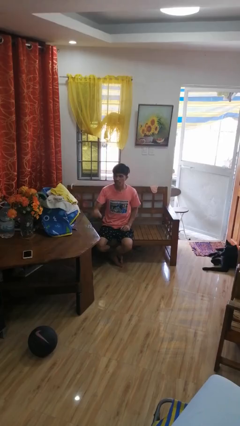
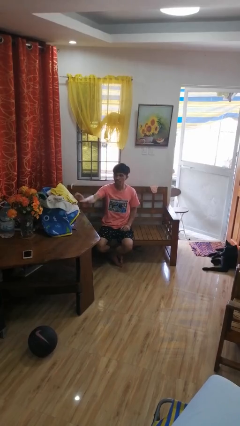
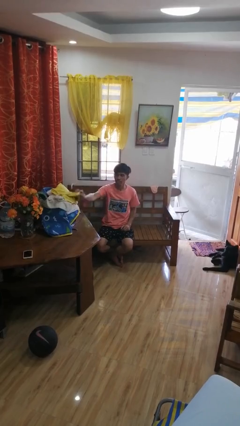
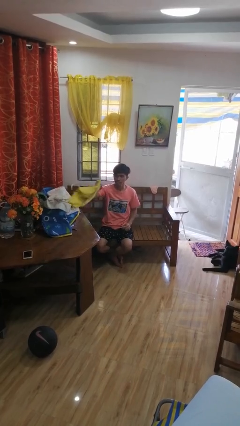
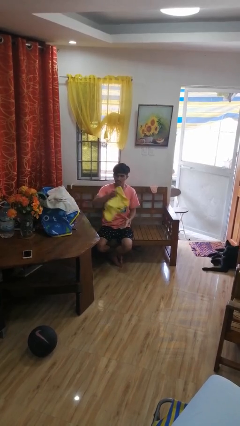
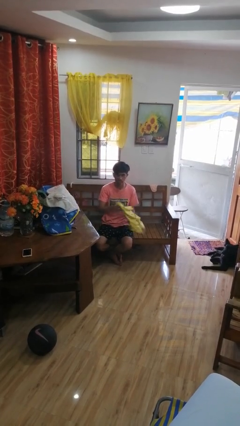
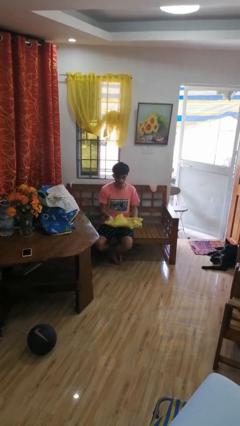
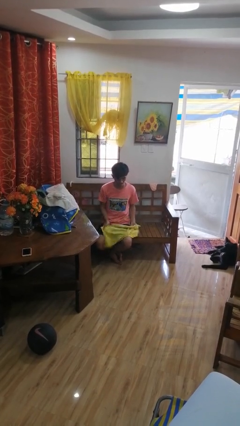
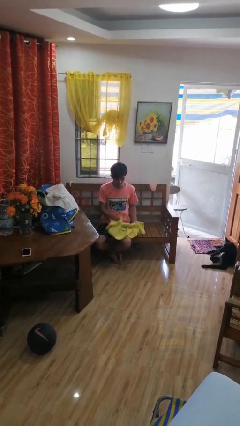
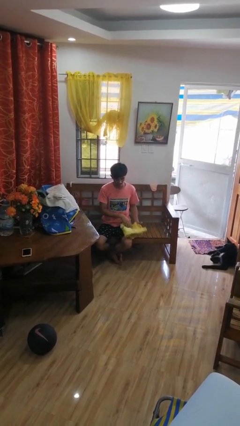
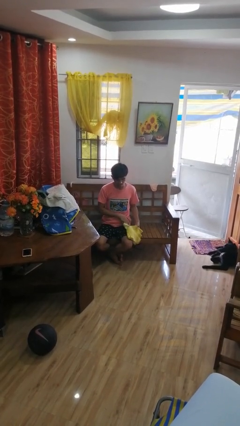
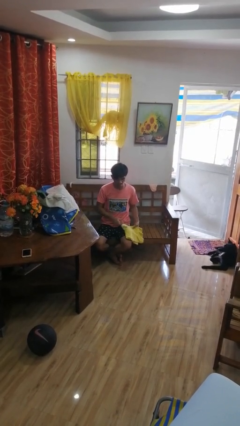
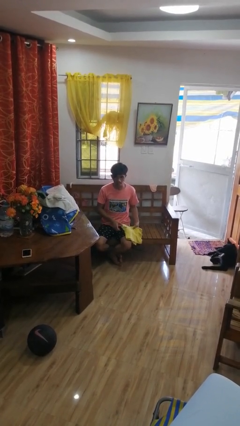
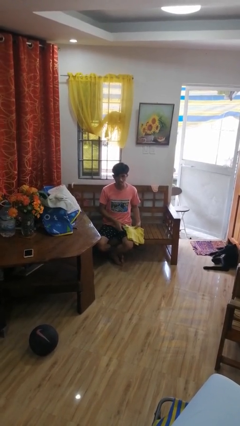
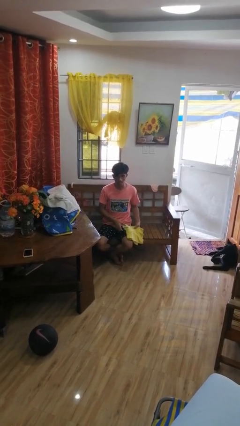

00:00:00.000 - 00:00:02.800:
person folds shirt

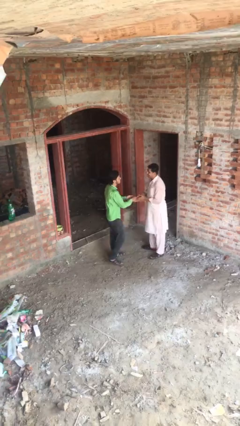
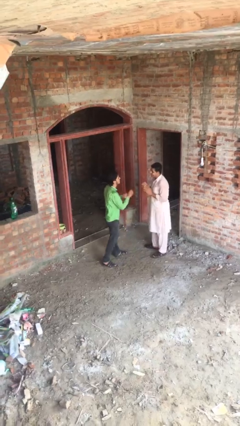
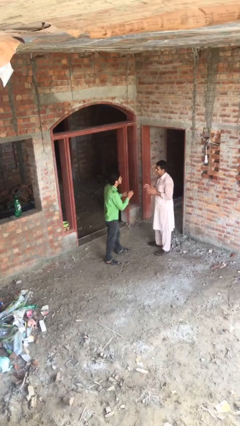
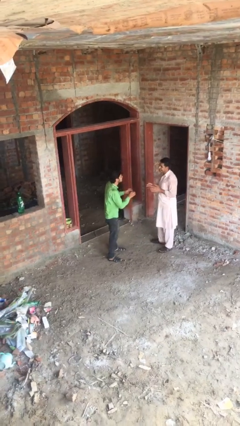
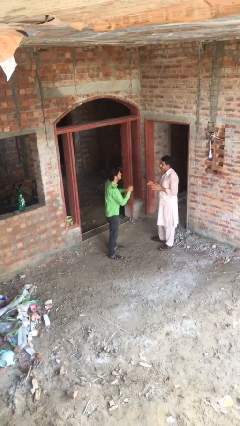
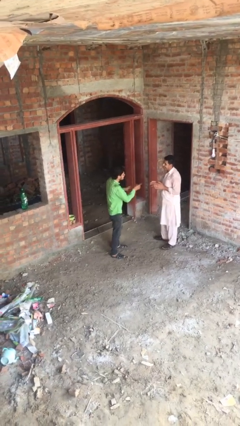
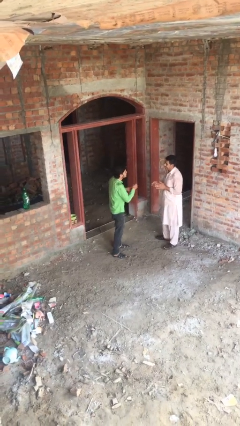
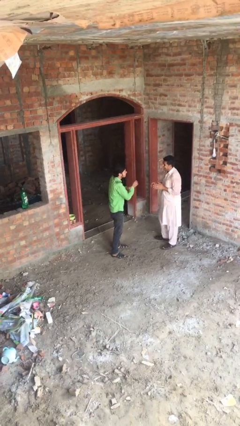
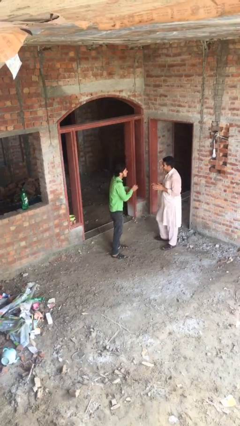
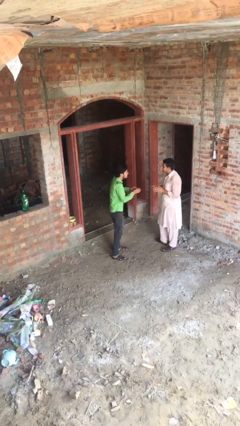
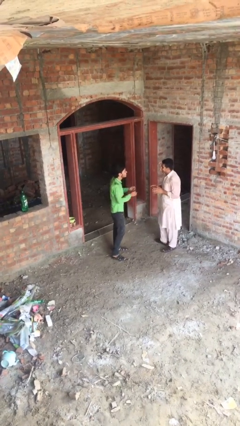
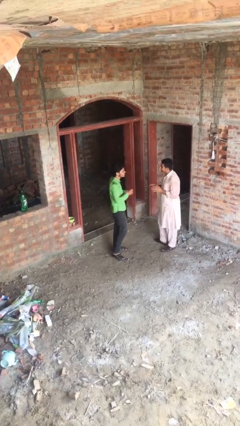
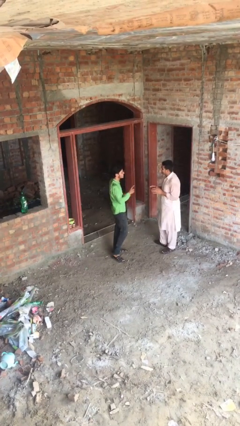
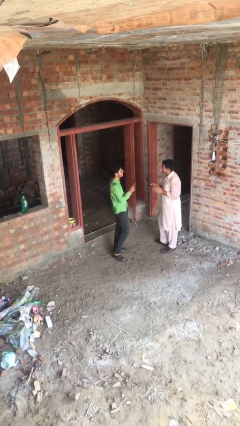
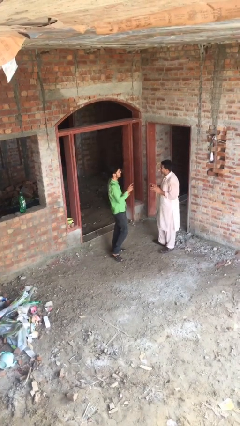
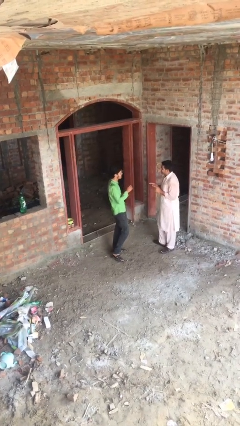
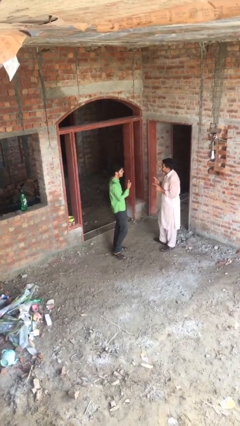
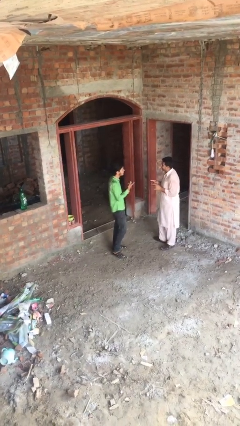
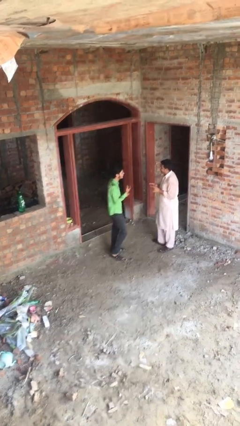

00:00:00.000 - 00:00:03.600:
person talks to person

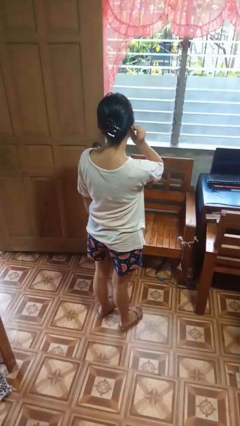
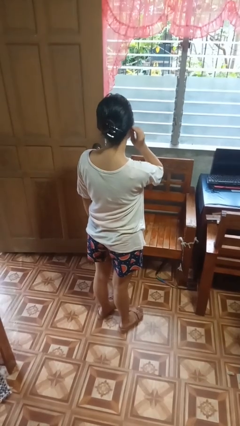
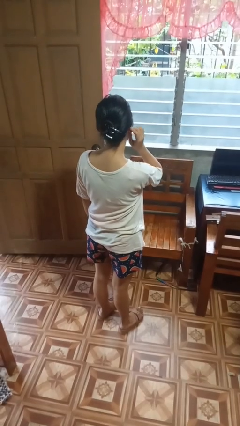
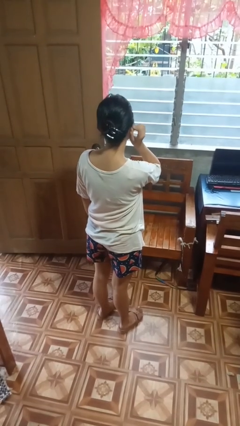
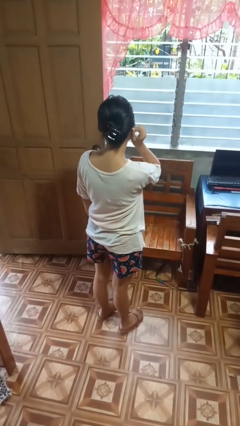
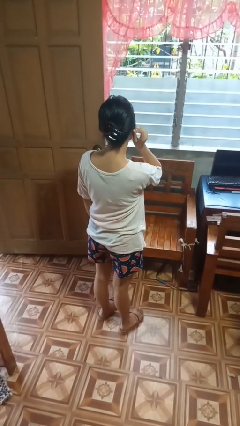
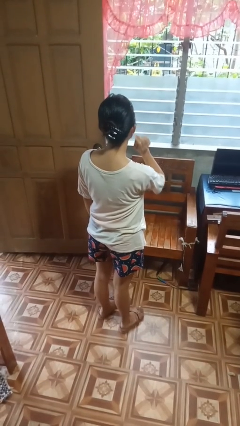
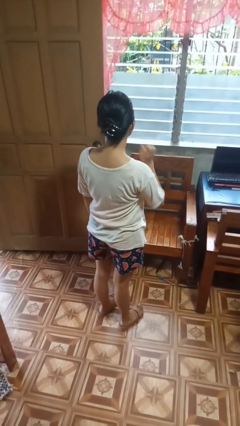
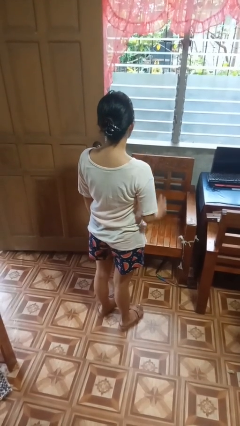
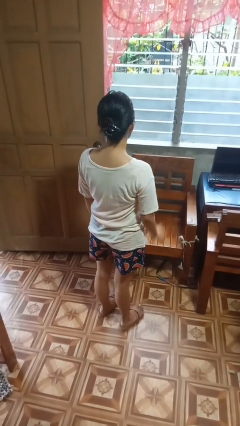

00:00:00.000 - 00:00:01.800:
person touches earlobe

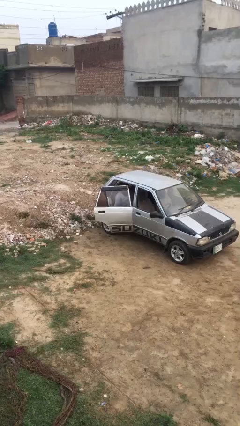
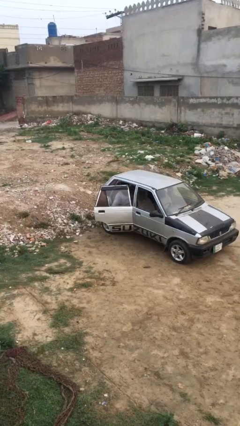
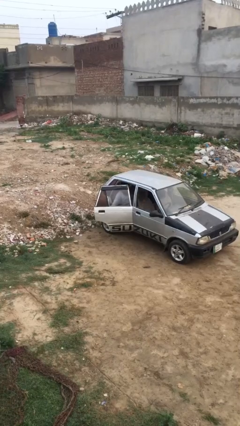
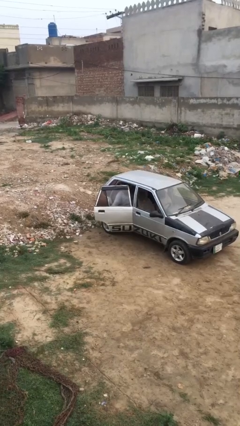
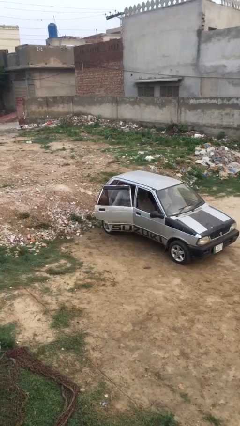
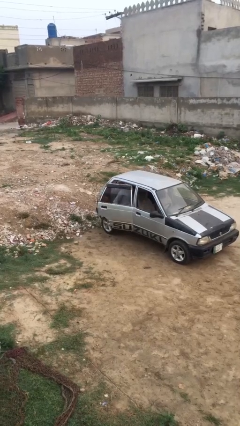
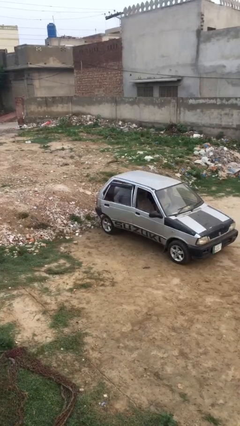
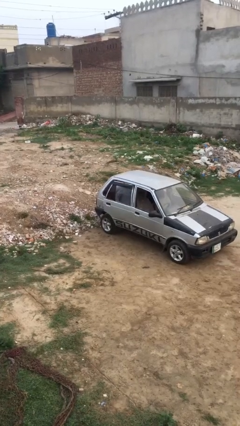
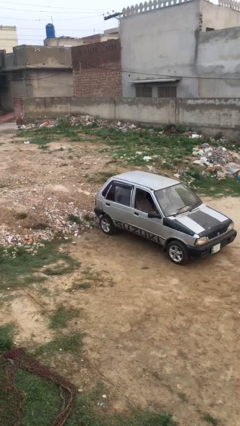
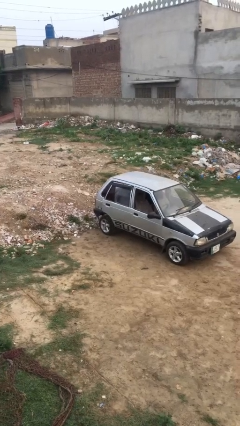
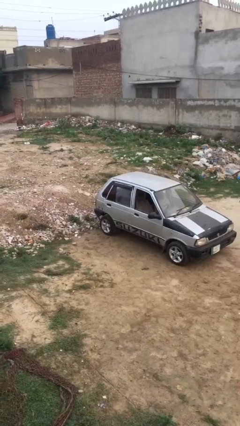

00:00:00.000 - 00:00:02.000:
person closes car door

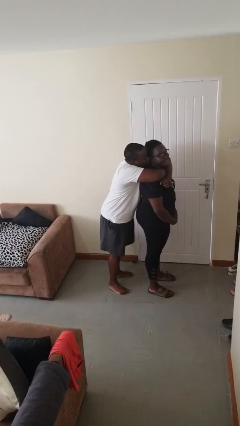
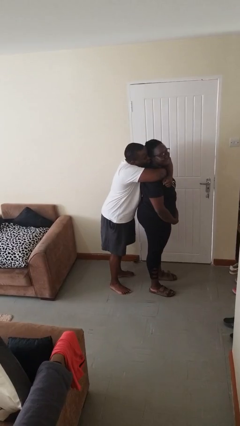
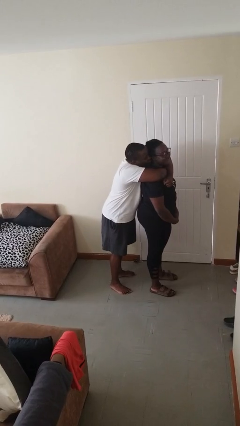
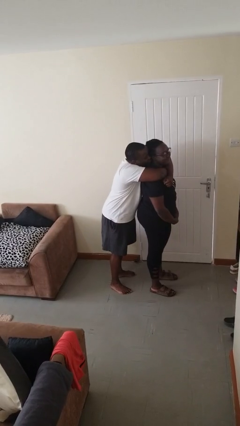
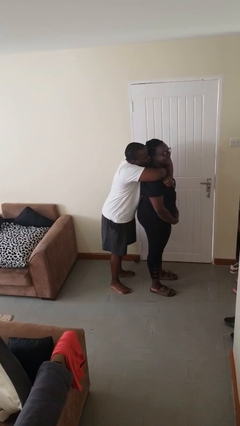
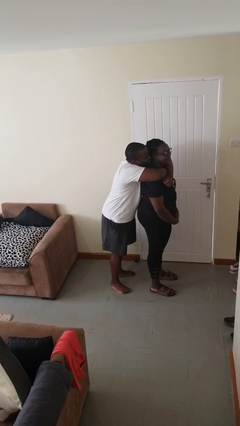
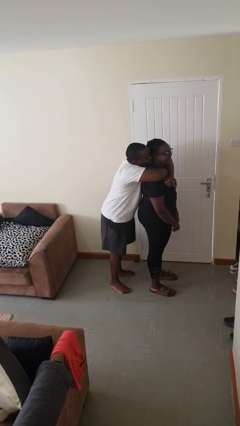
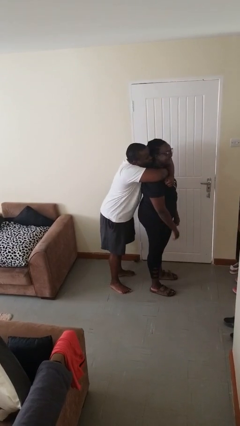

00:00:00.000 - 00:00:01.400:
person hugs person from behind

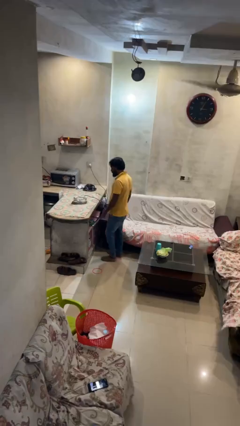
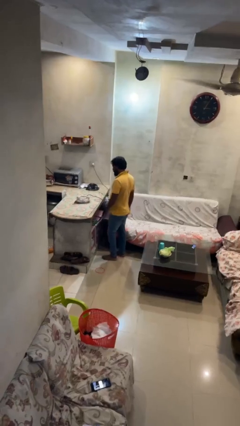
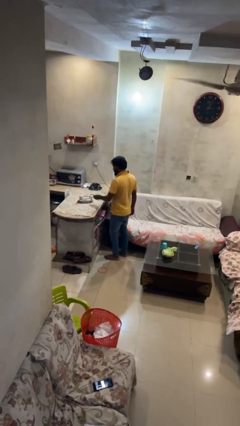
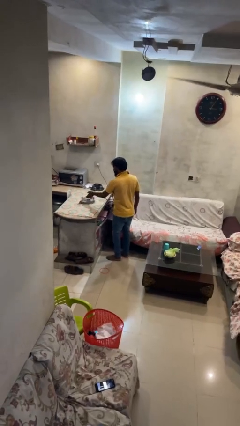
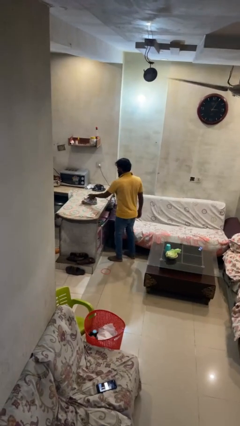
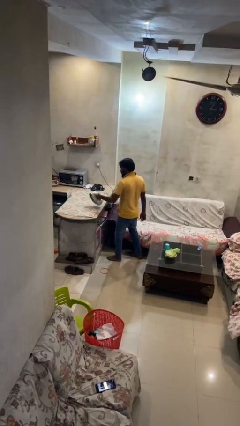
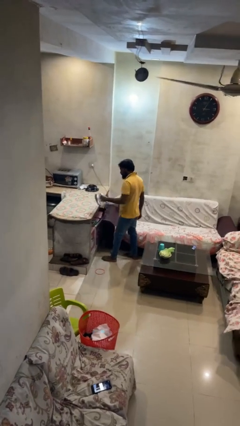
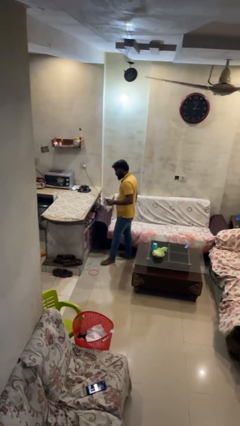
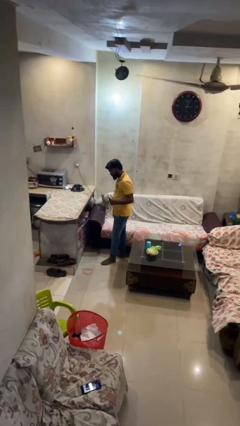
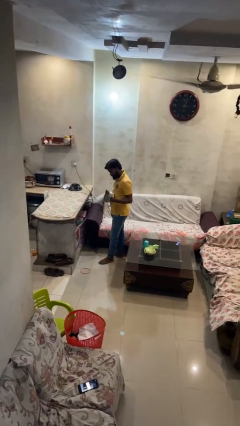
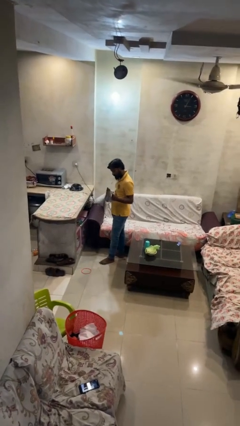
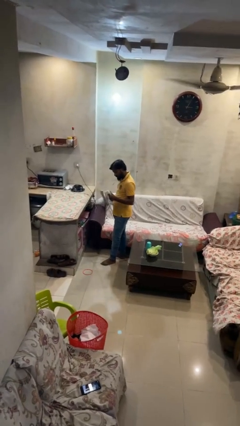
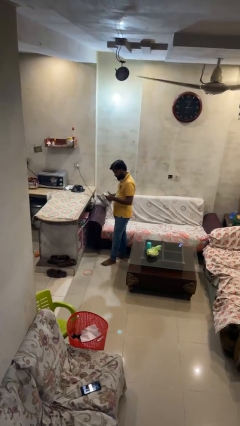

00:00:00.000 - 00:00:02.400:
person picks up object from countertop

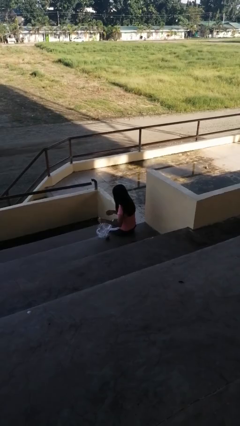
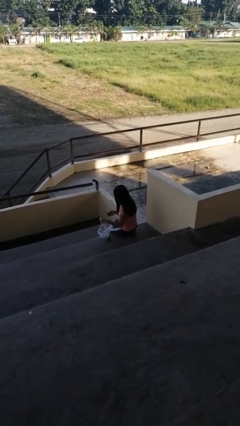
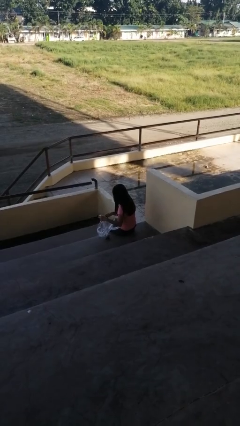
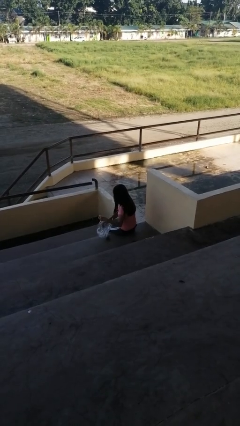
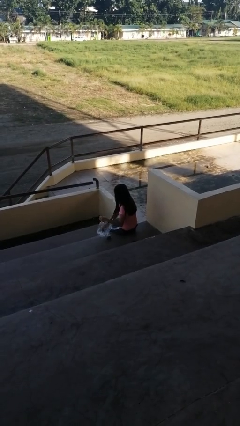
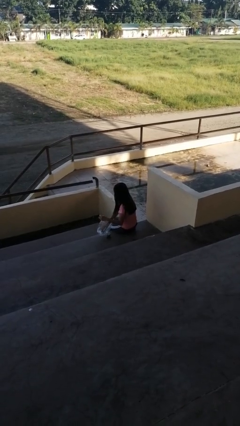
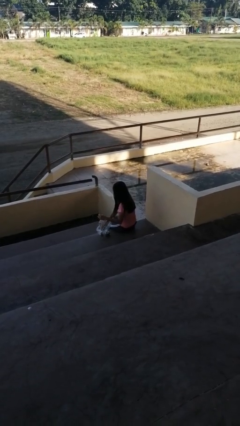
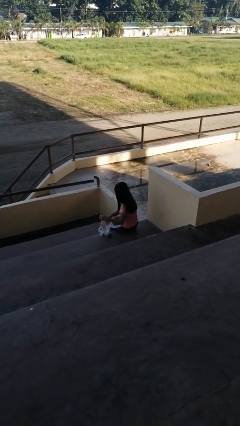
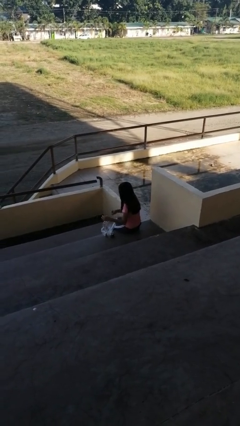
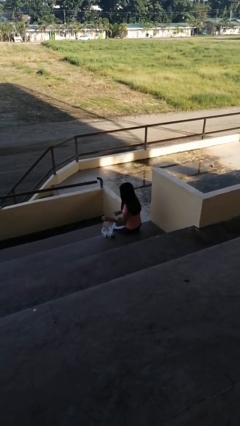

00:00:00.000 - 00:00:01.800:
person puts object into bag

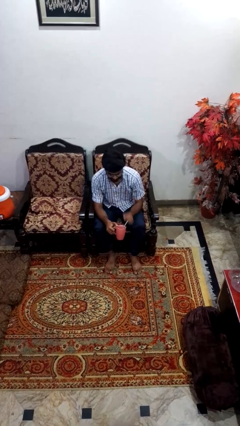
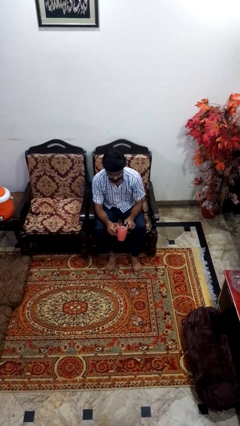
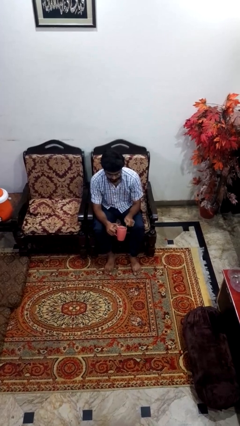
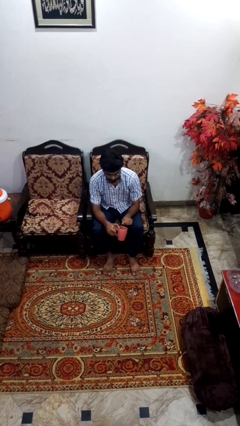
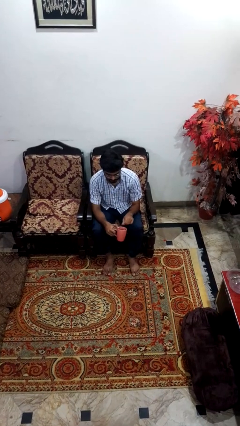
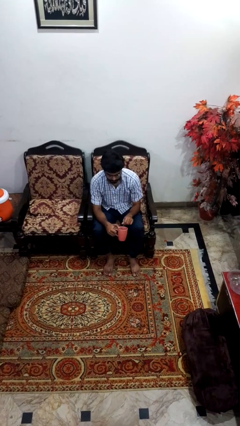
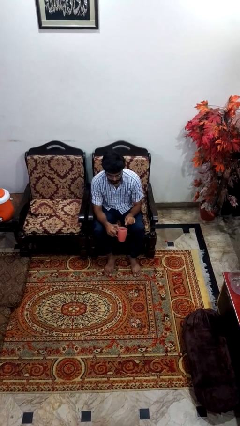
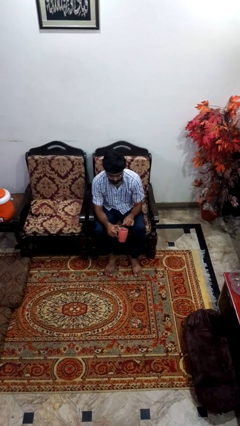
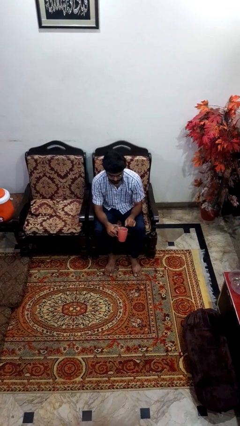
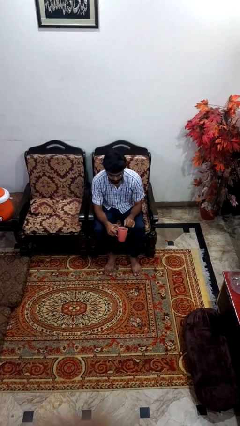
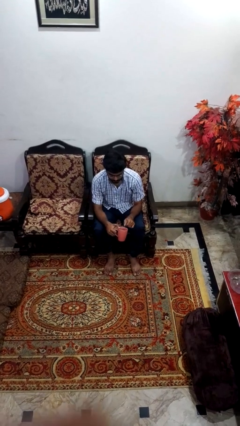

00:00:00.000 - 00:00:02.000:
person stirs mug
